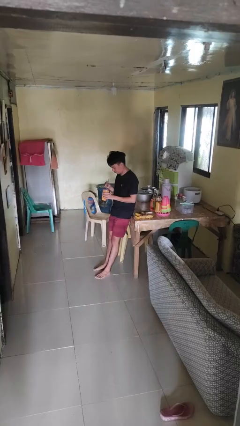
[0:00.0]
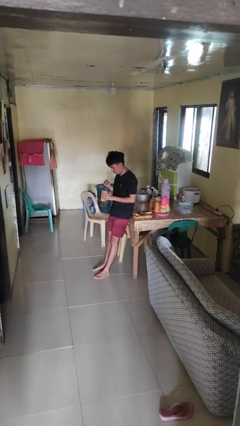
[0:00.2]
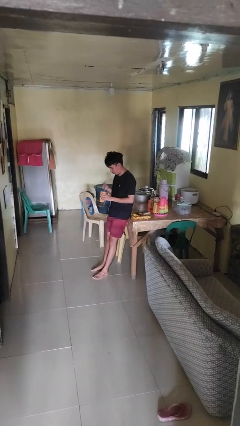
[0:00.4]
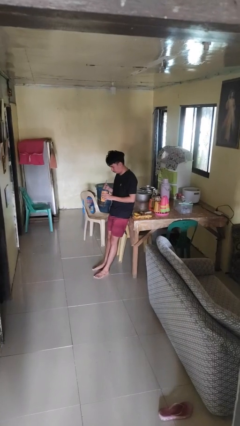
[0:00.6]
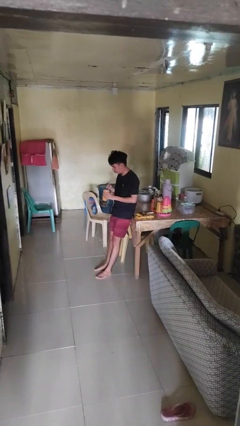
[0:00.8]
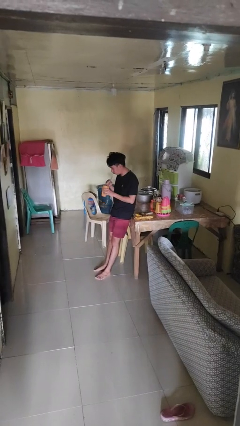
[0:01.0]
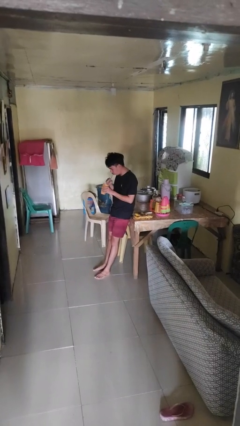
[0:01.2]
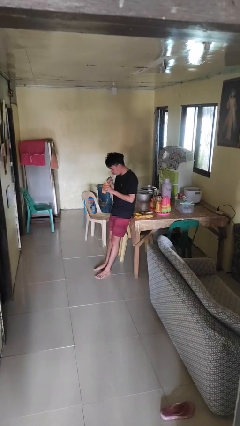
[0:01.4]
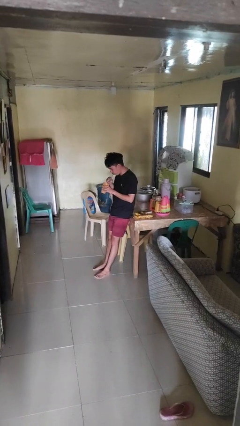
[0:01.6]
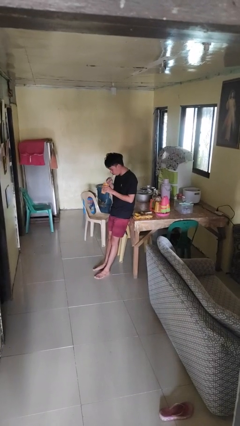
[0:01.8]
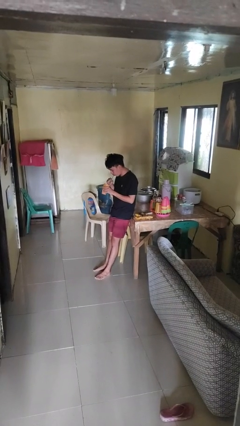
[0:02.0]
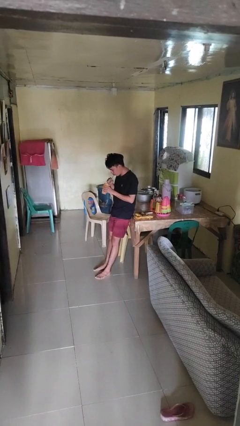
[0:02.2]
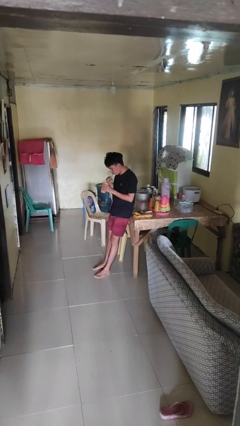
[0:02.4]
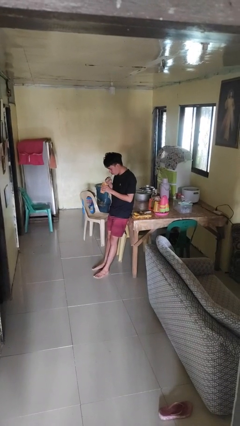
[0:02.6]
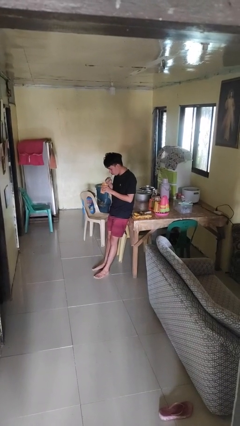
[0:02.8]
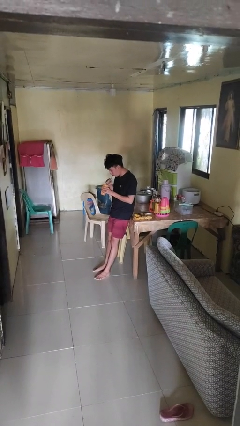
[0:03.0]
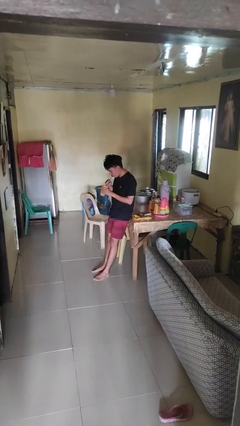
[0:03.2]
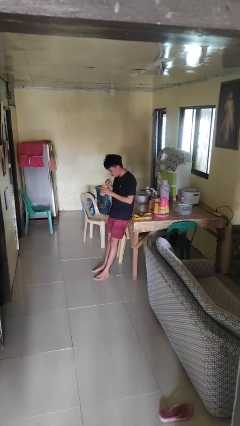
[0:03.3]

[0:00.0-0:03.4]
person drinks from straw

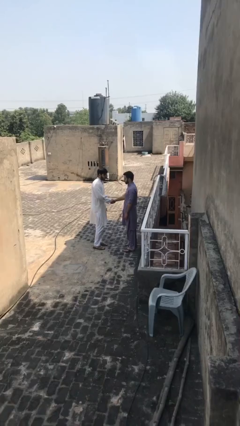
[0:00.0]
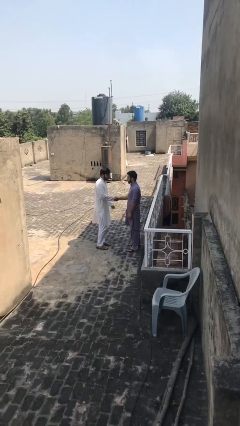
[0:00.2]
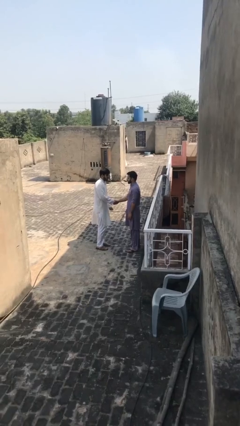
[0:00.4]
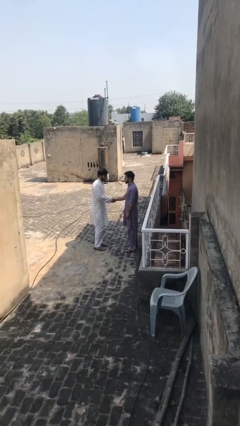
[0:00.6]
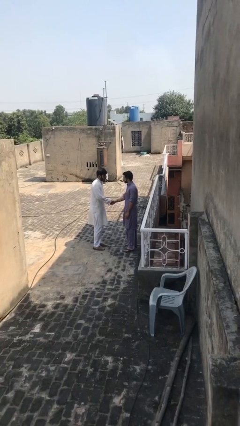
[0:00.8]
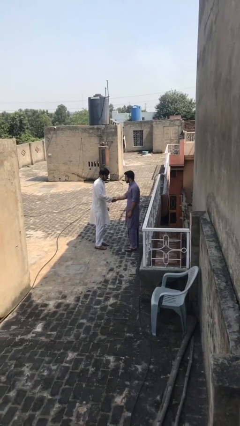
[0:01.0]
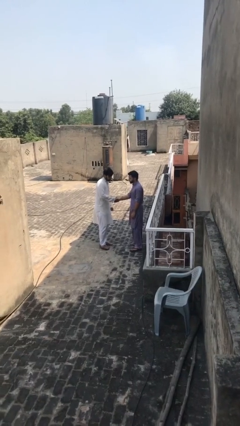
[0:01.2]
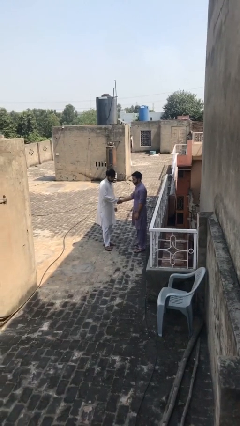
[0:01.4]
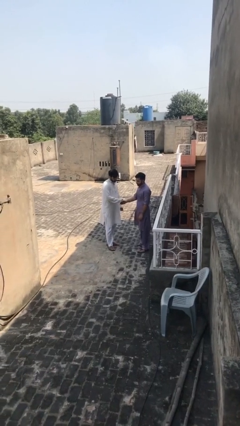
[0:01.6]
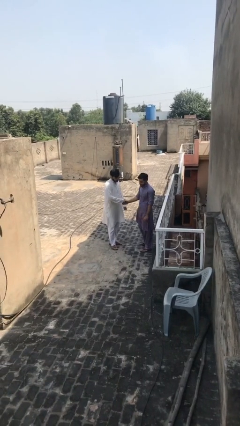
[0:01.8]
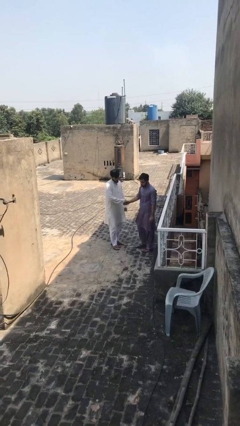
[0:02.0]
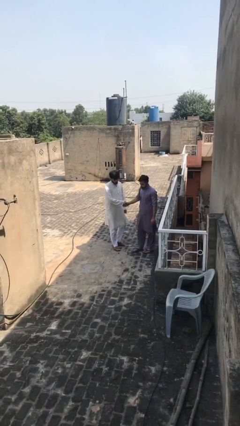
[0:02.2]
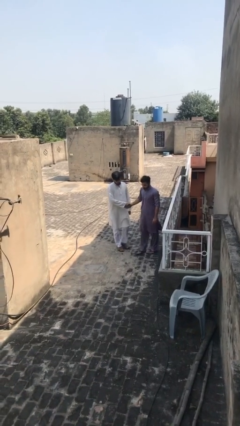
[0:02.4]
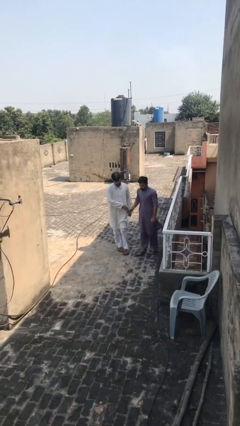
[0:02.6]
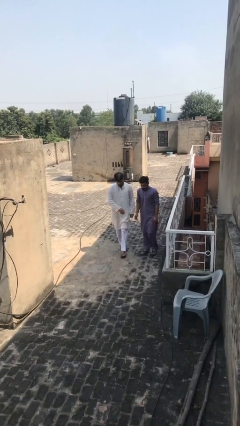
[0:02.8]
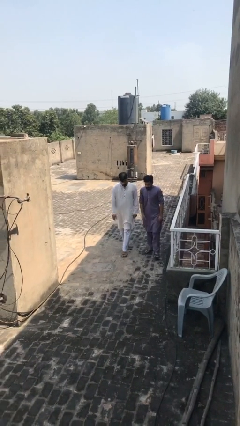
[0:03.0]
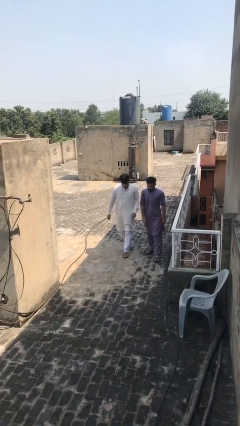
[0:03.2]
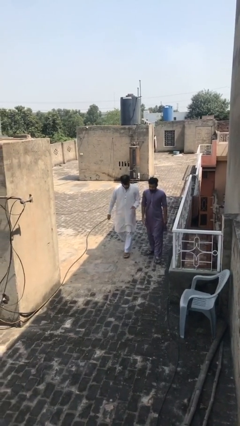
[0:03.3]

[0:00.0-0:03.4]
person shakes hand

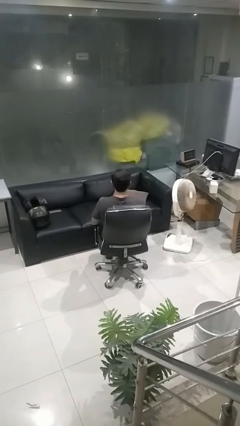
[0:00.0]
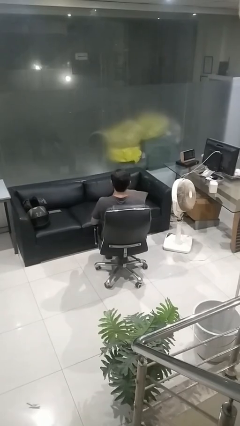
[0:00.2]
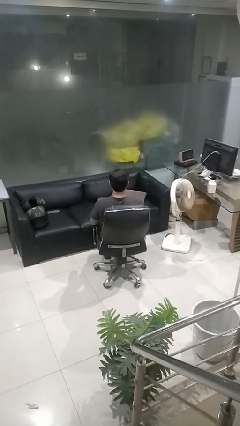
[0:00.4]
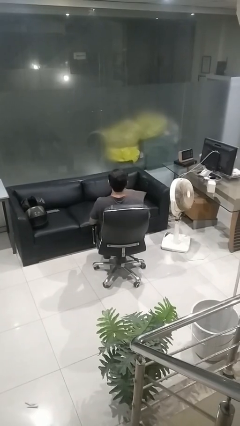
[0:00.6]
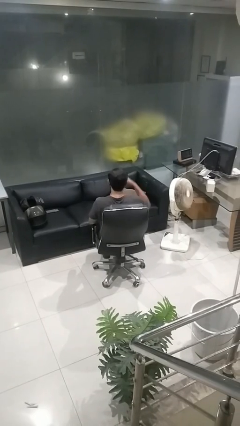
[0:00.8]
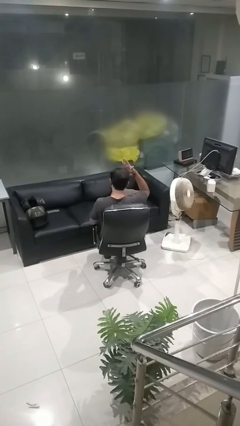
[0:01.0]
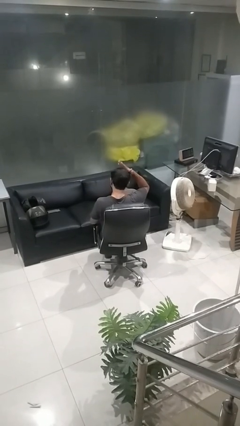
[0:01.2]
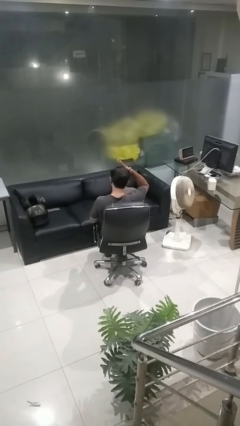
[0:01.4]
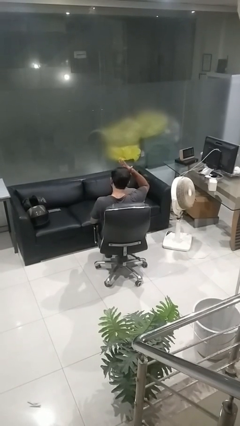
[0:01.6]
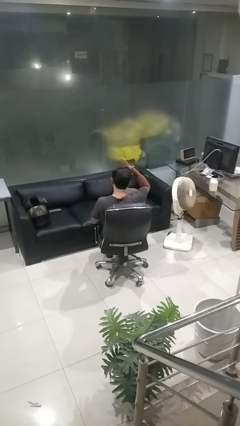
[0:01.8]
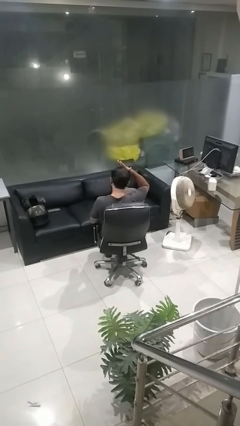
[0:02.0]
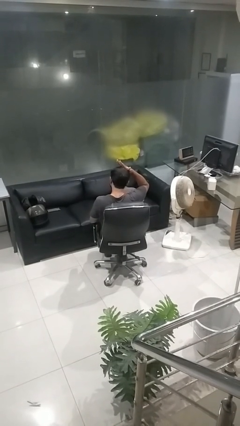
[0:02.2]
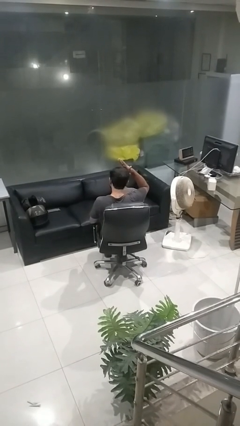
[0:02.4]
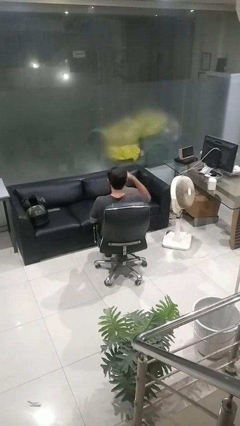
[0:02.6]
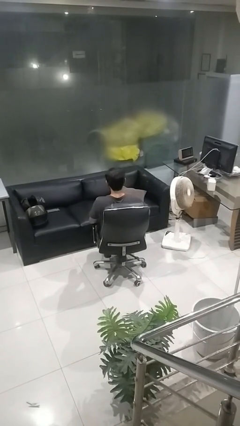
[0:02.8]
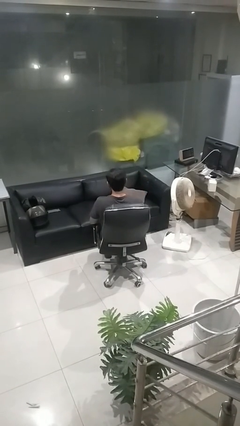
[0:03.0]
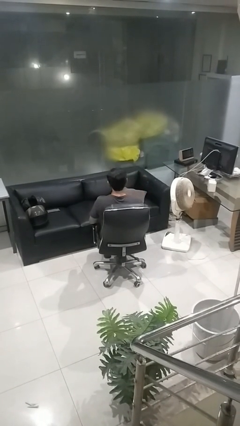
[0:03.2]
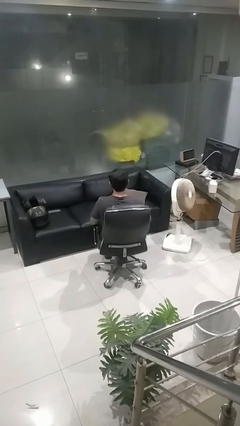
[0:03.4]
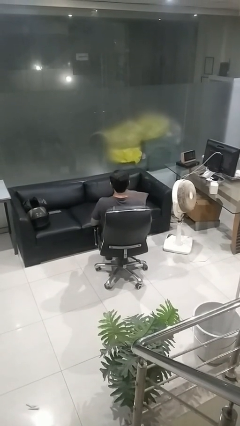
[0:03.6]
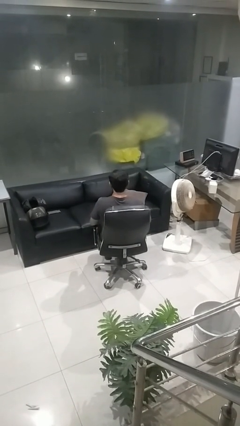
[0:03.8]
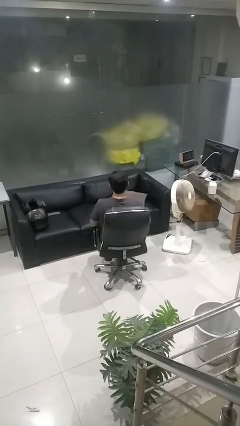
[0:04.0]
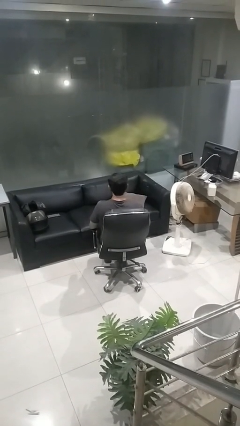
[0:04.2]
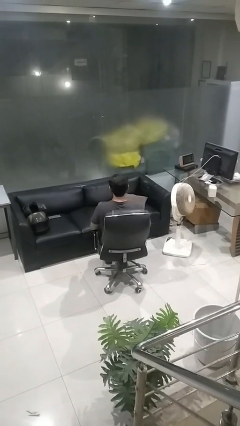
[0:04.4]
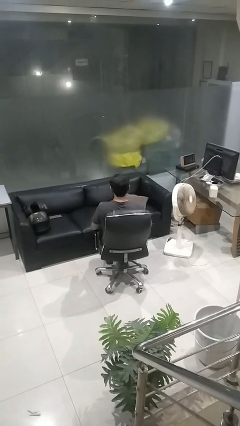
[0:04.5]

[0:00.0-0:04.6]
person pats head

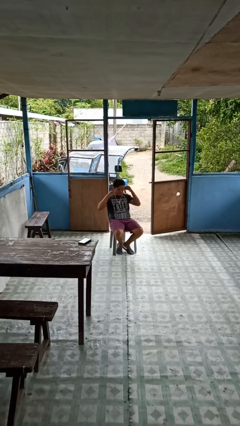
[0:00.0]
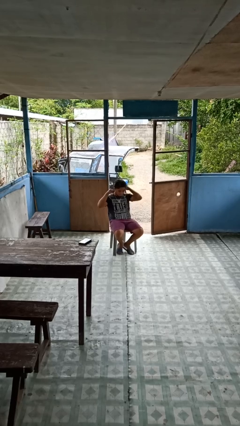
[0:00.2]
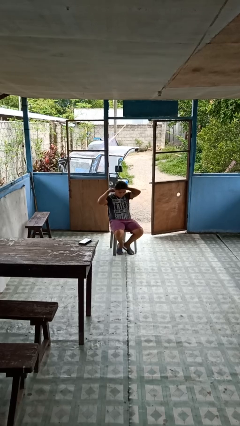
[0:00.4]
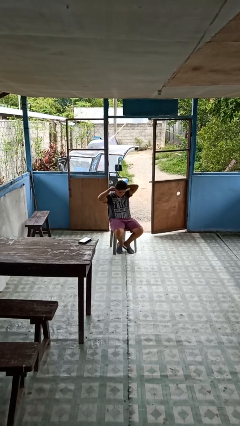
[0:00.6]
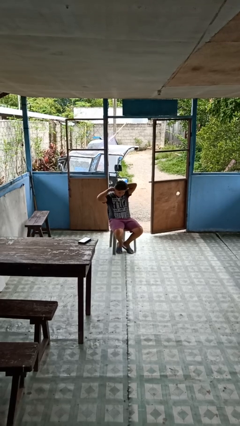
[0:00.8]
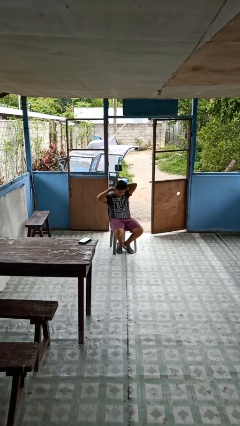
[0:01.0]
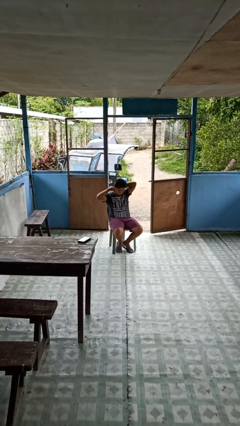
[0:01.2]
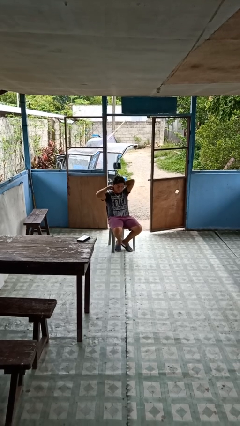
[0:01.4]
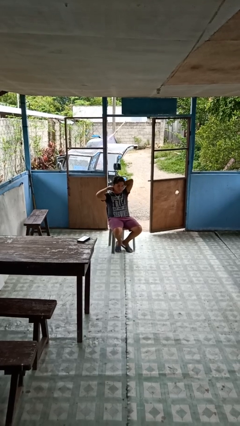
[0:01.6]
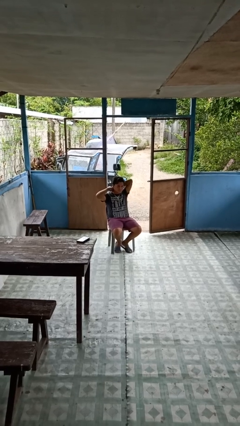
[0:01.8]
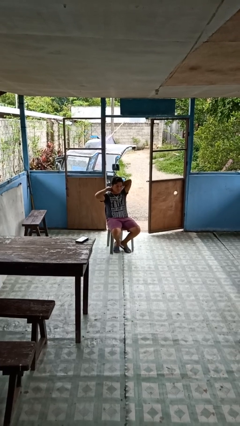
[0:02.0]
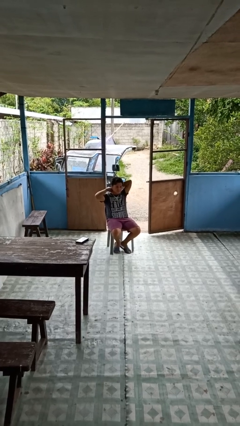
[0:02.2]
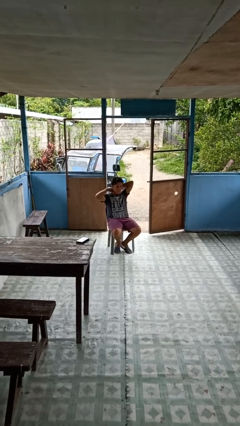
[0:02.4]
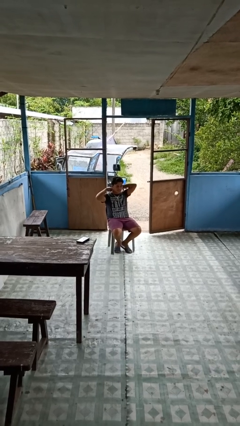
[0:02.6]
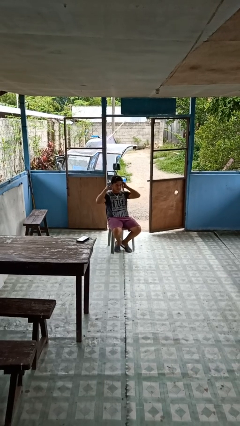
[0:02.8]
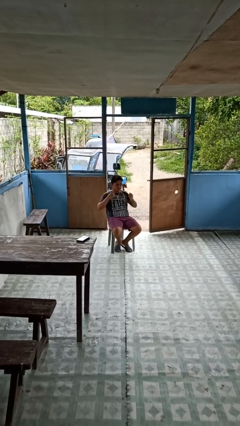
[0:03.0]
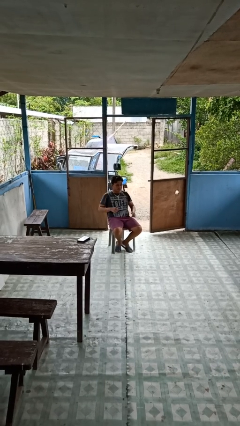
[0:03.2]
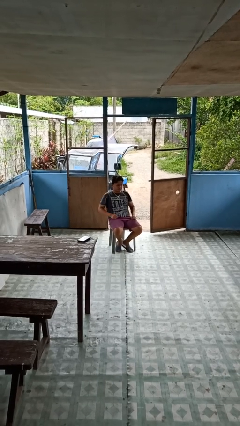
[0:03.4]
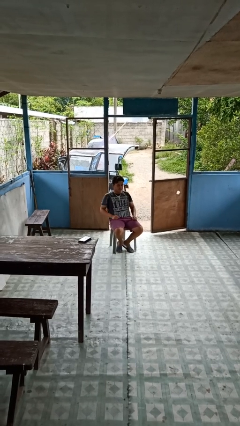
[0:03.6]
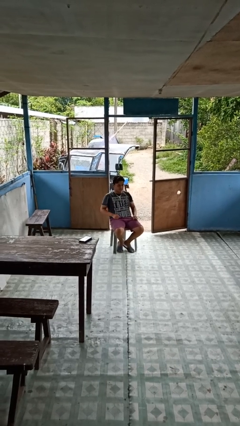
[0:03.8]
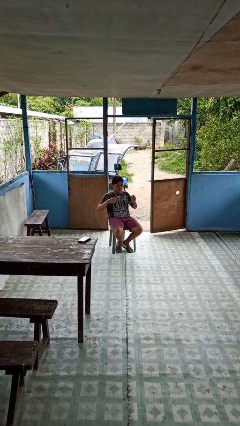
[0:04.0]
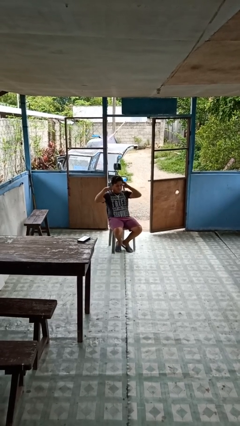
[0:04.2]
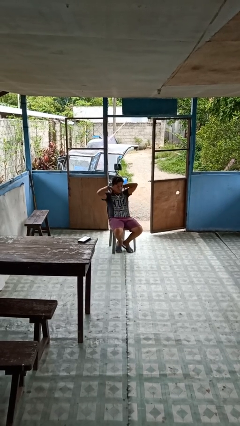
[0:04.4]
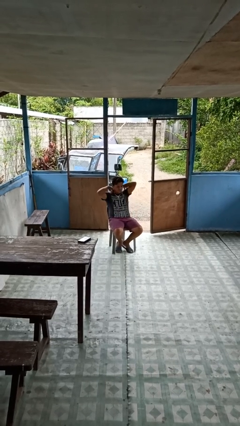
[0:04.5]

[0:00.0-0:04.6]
person puts on necklace

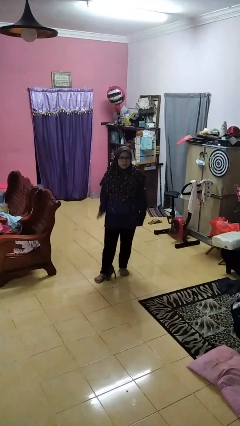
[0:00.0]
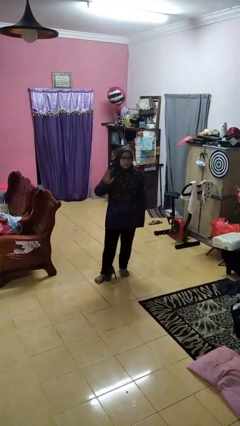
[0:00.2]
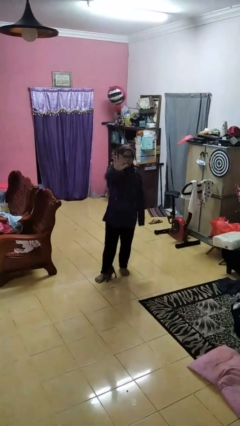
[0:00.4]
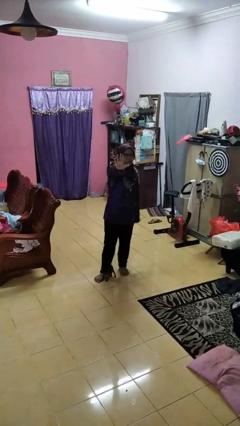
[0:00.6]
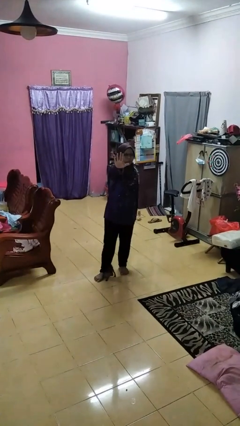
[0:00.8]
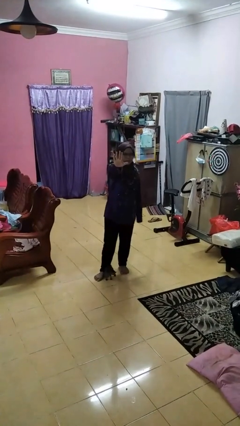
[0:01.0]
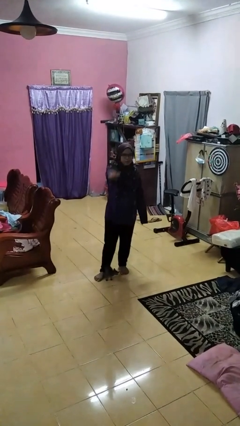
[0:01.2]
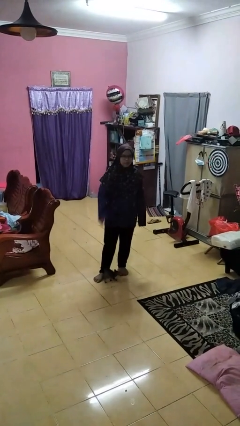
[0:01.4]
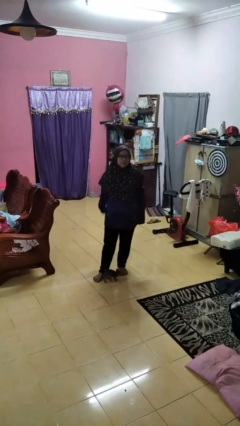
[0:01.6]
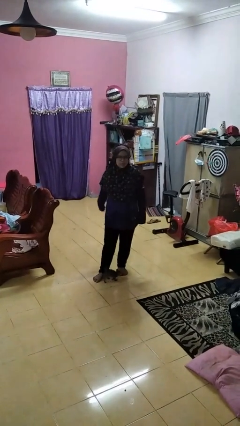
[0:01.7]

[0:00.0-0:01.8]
person gestures stop
